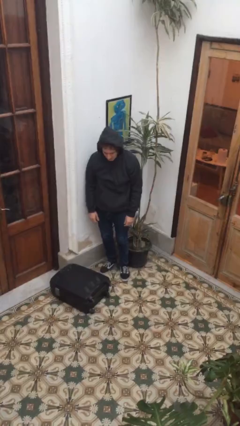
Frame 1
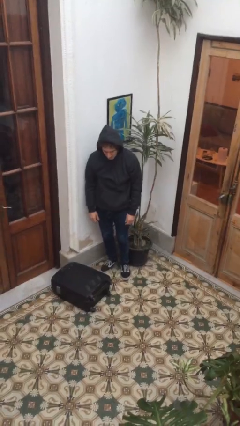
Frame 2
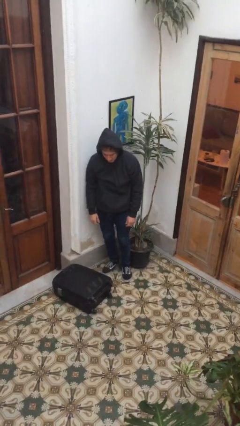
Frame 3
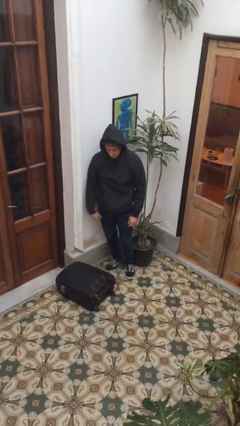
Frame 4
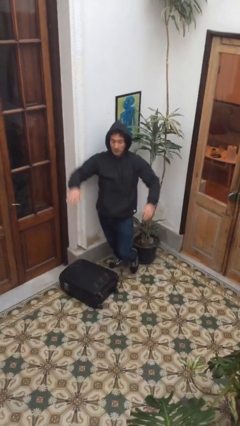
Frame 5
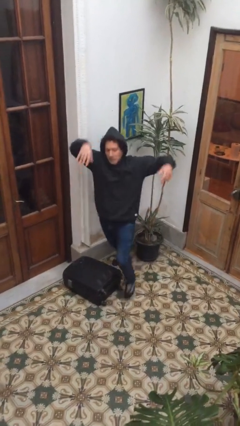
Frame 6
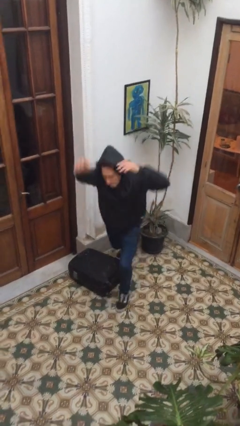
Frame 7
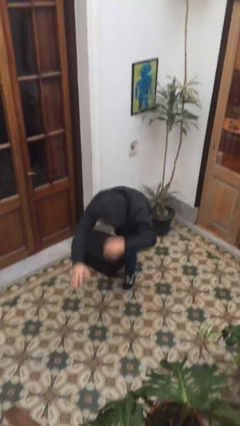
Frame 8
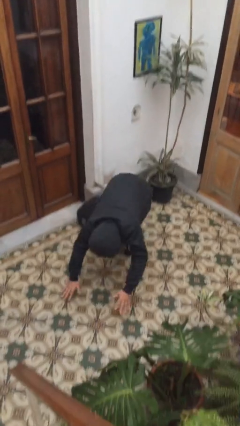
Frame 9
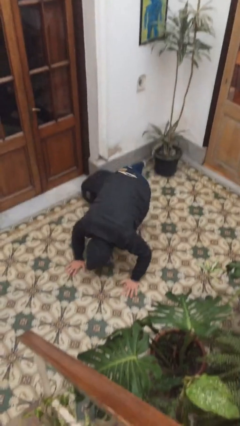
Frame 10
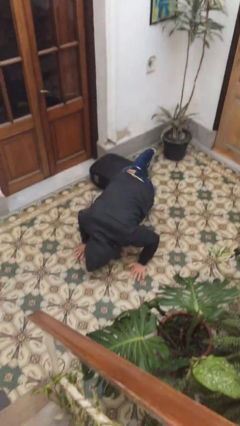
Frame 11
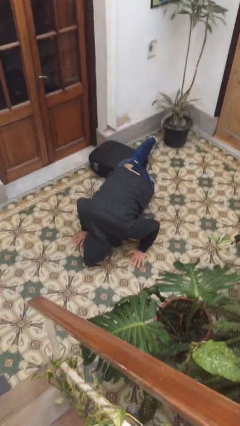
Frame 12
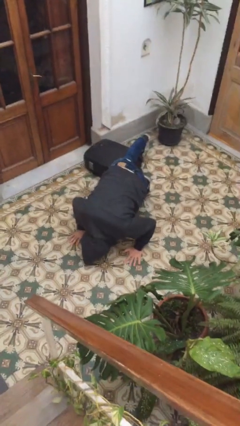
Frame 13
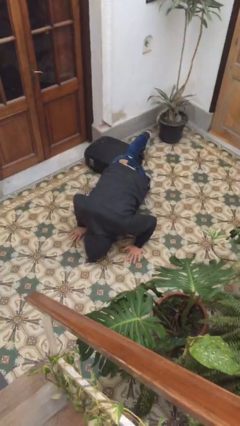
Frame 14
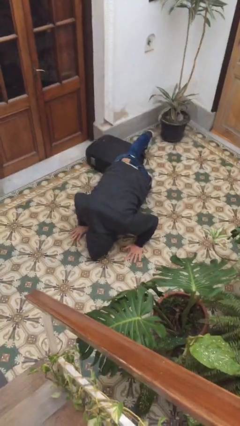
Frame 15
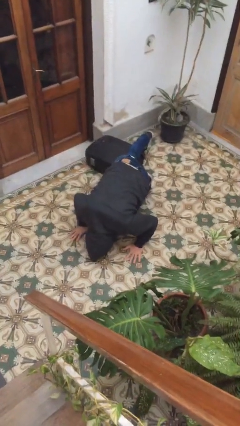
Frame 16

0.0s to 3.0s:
person trips on object on floor

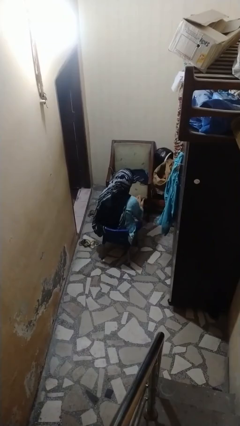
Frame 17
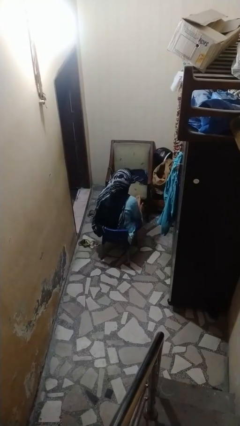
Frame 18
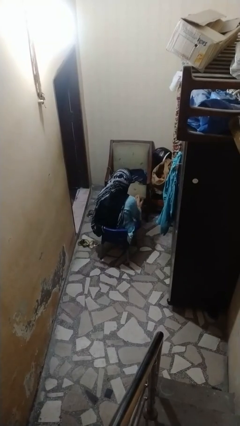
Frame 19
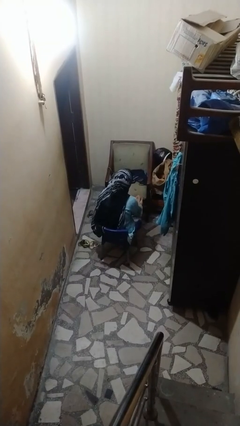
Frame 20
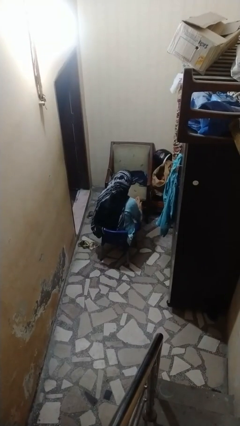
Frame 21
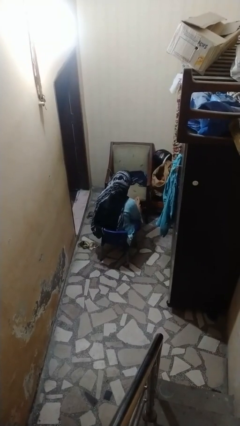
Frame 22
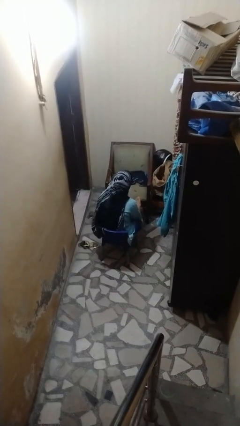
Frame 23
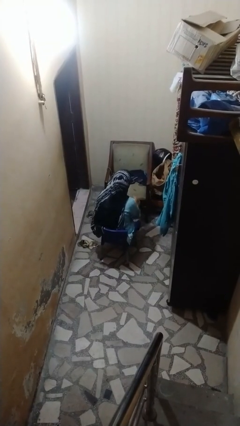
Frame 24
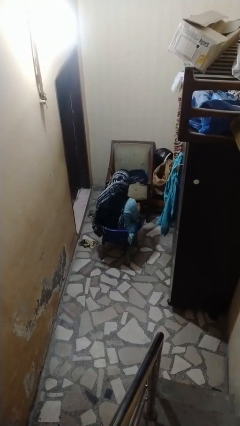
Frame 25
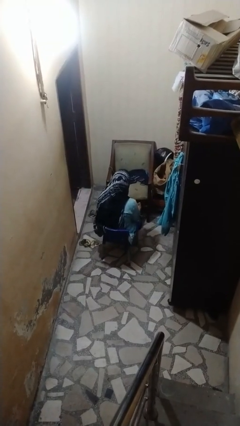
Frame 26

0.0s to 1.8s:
person rubs foot

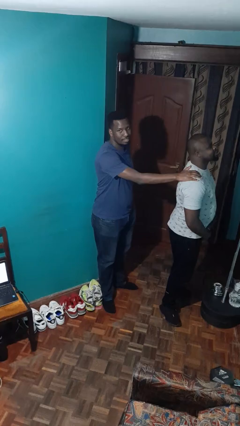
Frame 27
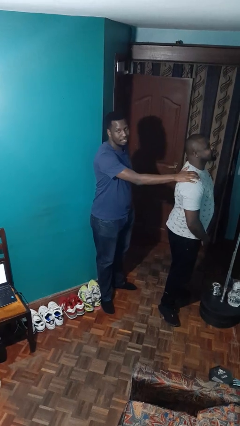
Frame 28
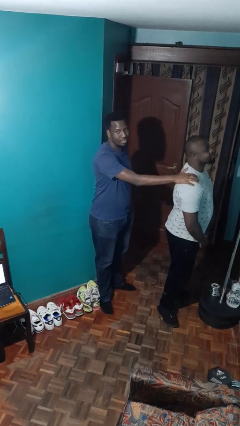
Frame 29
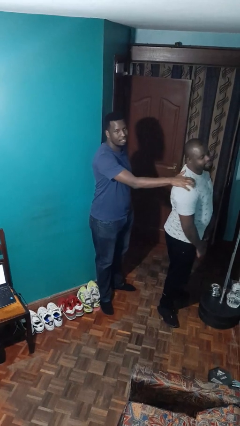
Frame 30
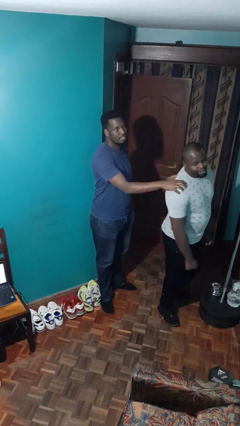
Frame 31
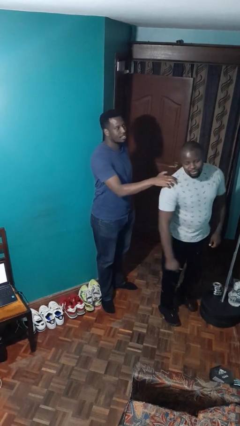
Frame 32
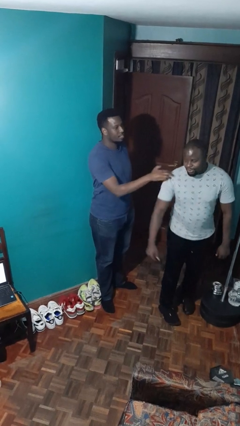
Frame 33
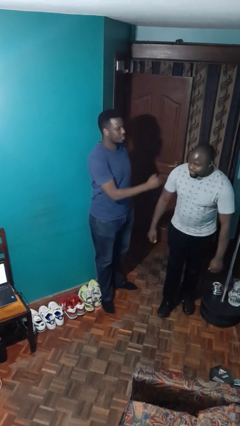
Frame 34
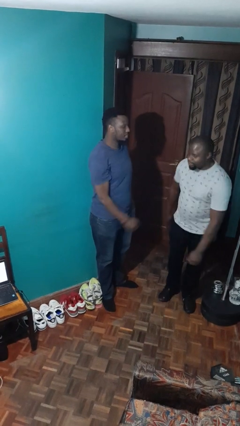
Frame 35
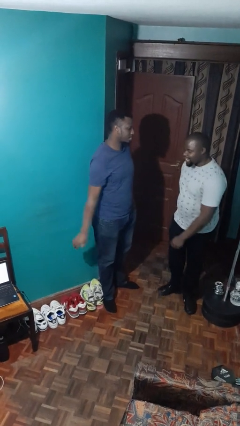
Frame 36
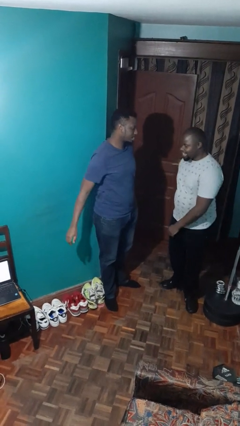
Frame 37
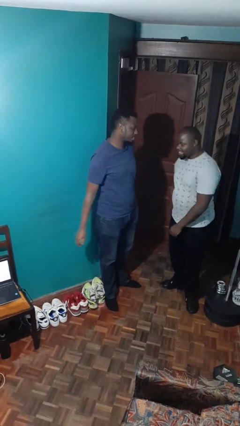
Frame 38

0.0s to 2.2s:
person spins person around

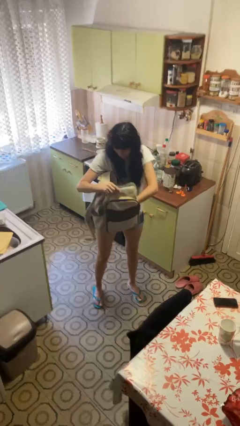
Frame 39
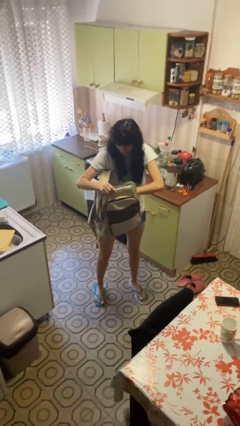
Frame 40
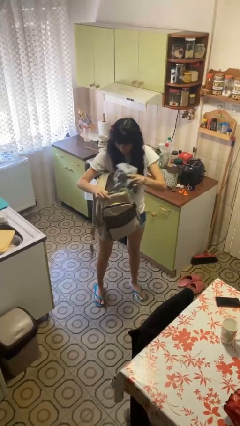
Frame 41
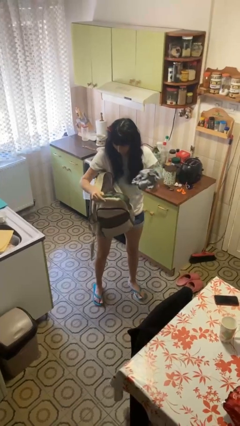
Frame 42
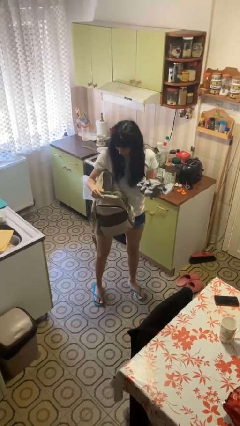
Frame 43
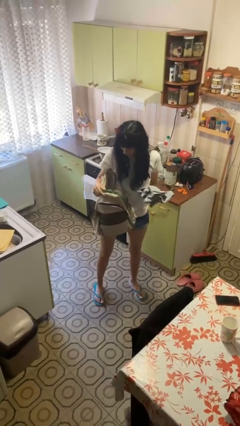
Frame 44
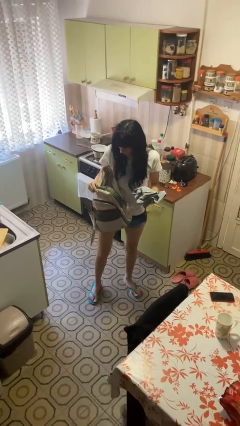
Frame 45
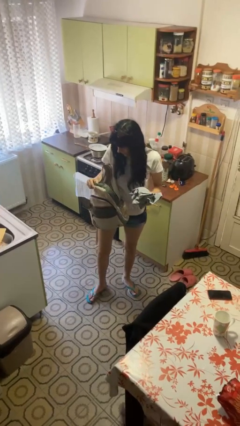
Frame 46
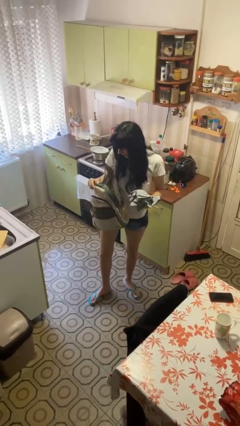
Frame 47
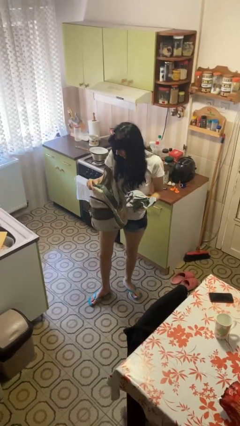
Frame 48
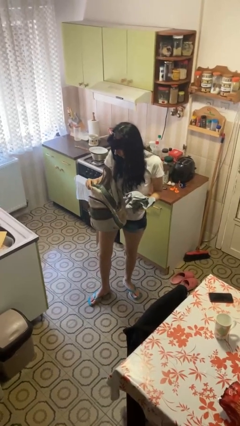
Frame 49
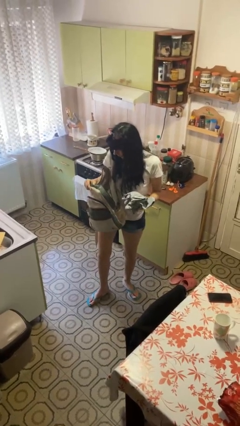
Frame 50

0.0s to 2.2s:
person takes object from backpack

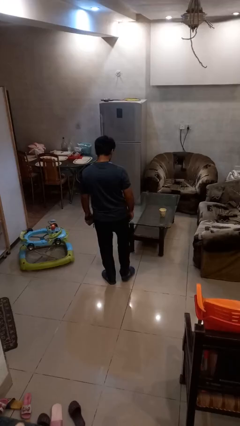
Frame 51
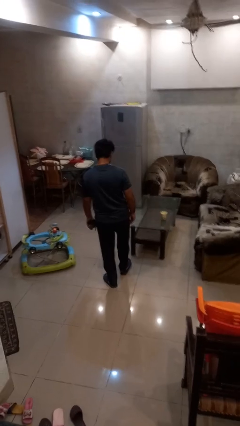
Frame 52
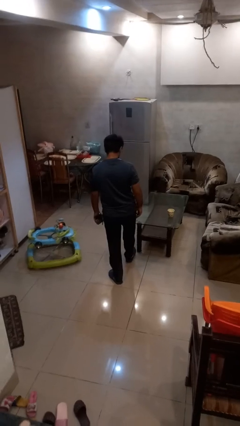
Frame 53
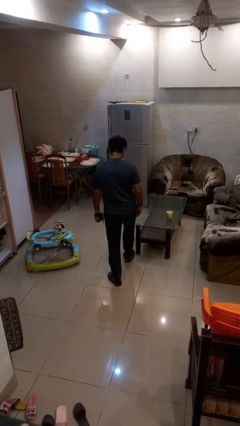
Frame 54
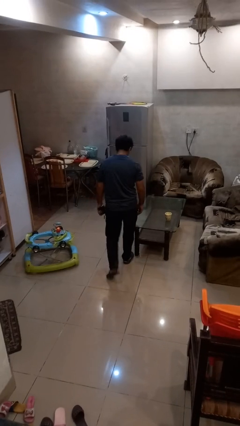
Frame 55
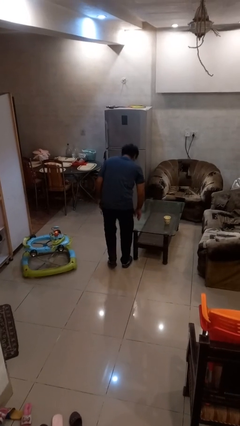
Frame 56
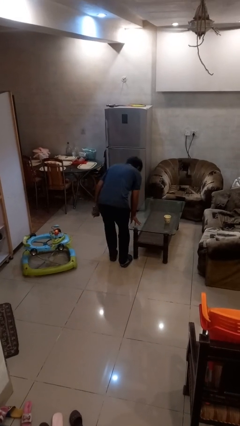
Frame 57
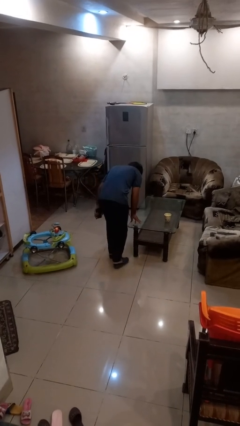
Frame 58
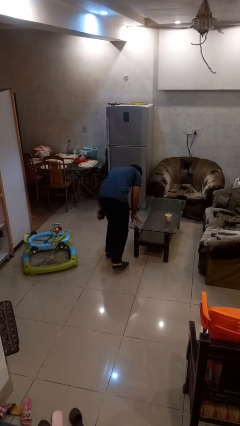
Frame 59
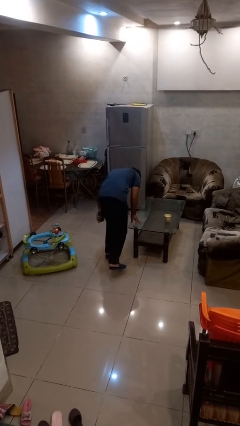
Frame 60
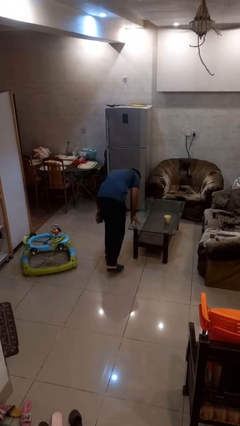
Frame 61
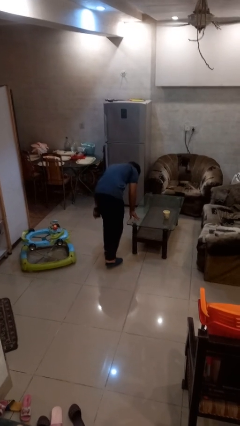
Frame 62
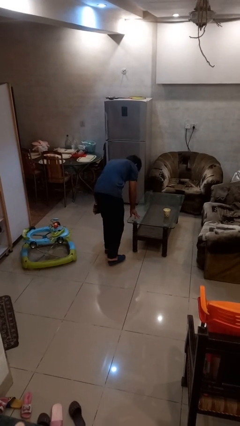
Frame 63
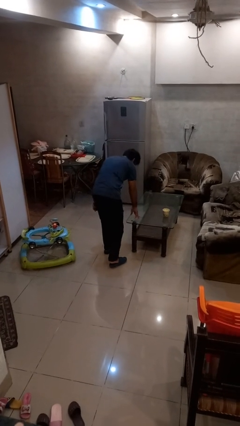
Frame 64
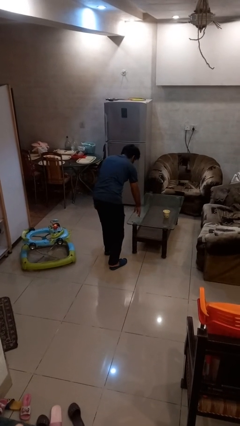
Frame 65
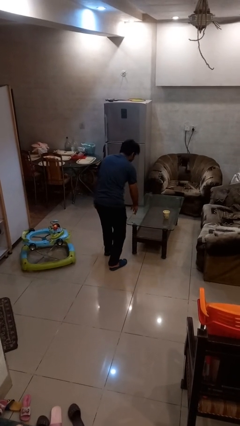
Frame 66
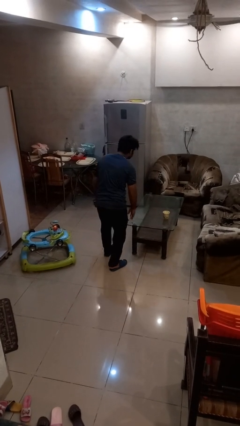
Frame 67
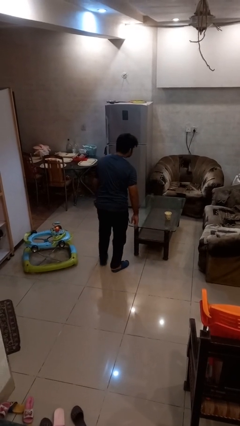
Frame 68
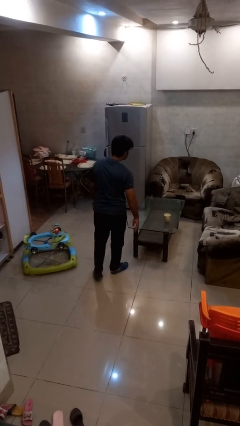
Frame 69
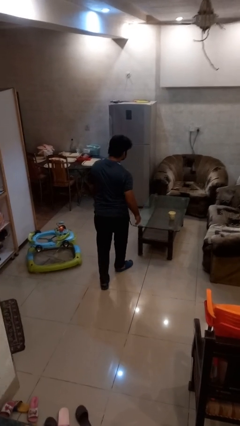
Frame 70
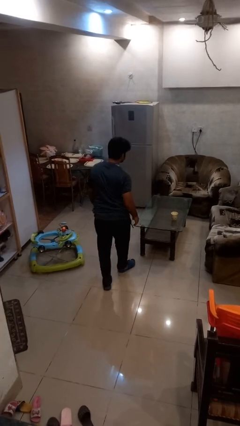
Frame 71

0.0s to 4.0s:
person bumps into table

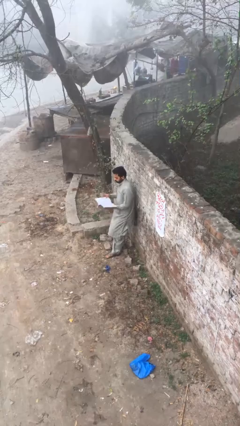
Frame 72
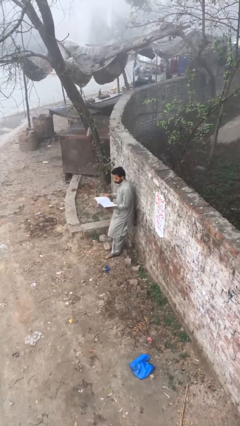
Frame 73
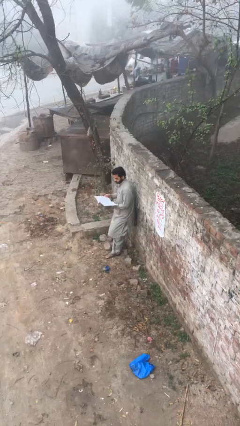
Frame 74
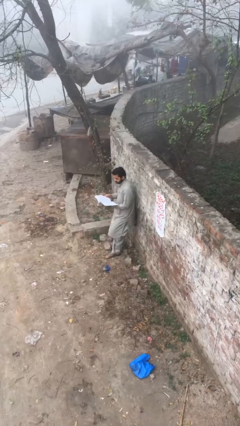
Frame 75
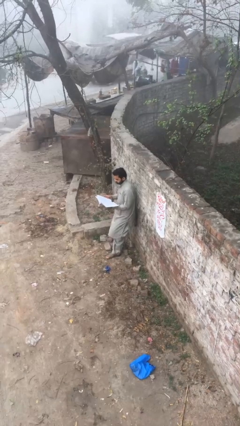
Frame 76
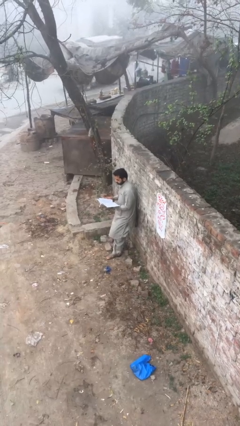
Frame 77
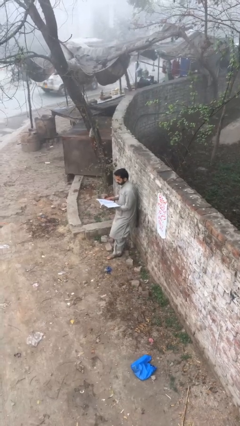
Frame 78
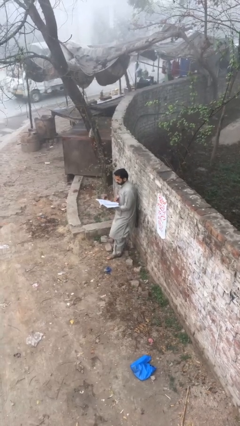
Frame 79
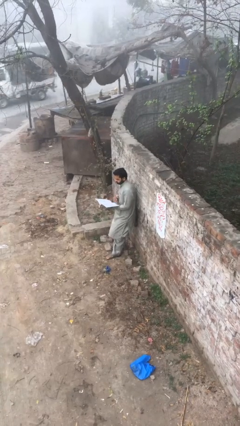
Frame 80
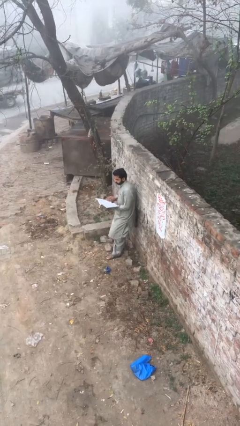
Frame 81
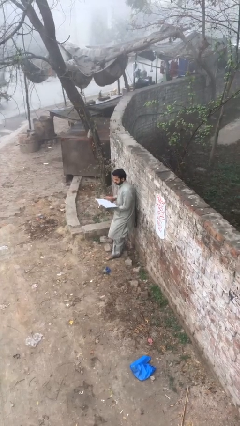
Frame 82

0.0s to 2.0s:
person reads document

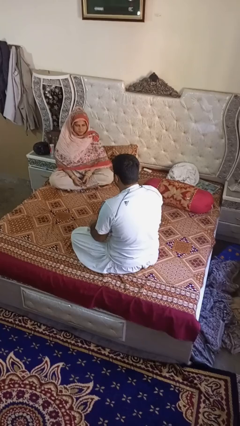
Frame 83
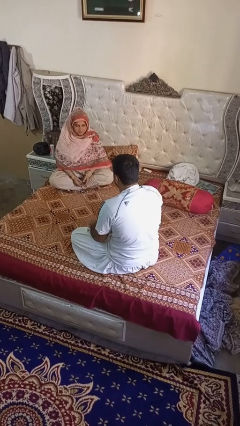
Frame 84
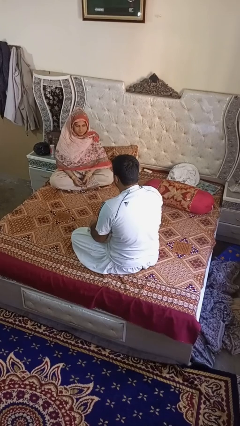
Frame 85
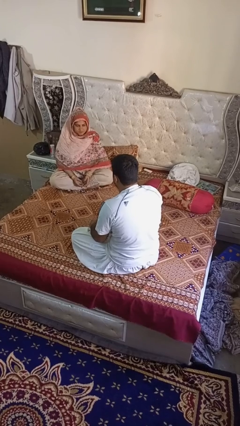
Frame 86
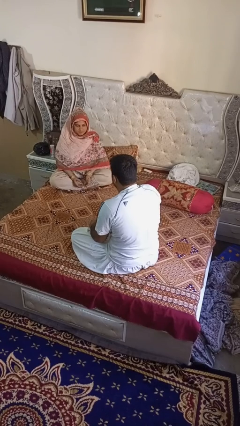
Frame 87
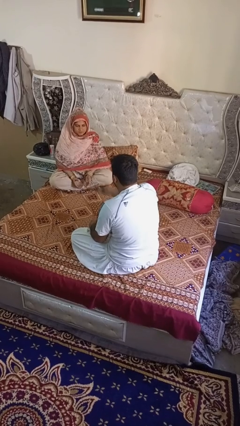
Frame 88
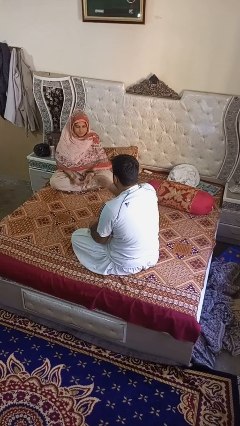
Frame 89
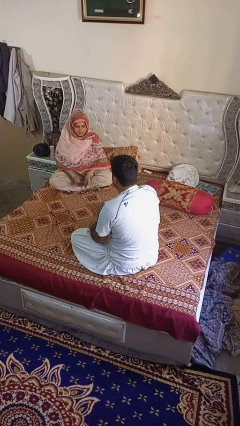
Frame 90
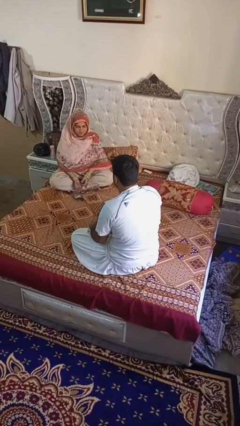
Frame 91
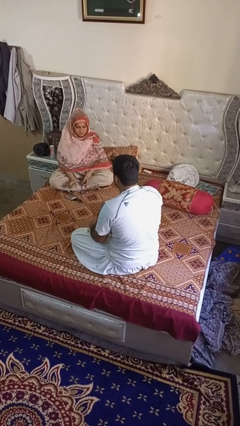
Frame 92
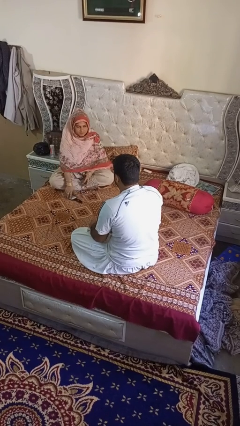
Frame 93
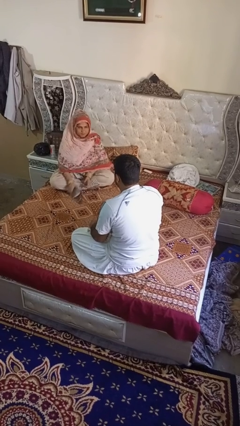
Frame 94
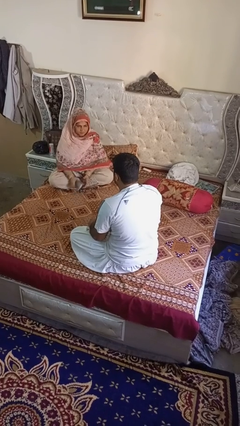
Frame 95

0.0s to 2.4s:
person throws object to person
